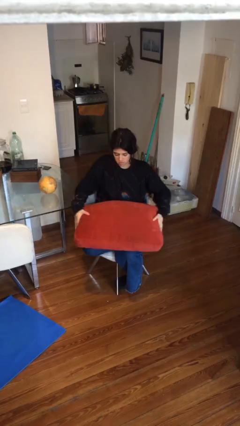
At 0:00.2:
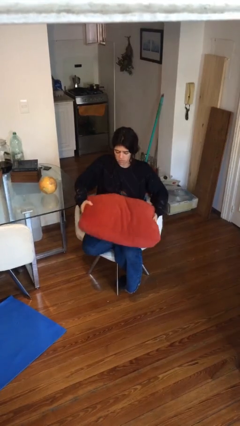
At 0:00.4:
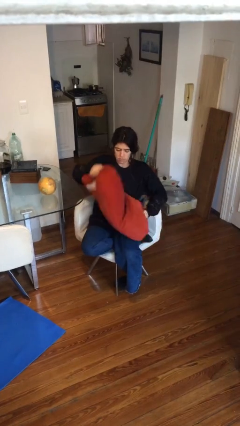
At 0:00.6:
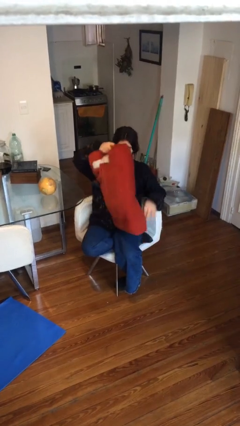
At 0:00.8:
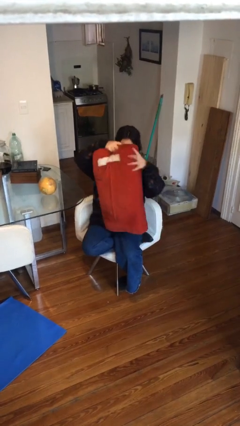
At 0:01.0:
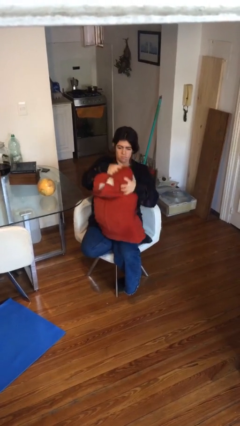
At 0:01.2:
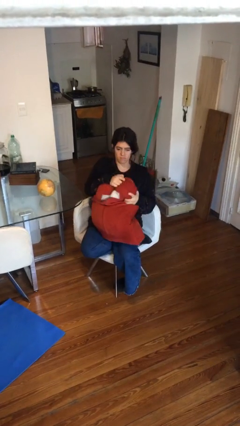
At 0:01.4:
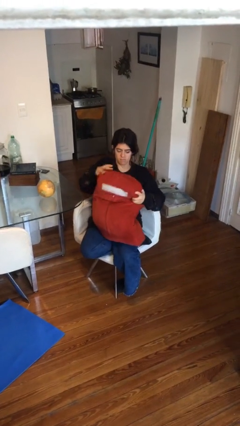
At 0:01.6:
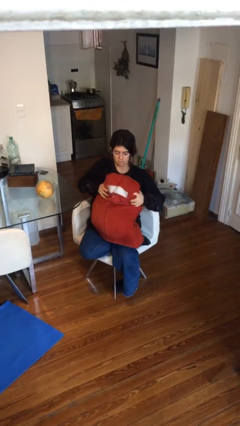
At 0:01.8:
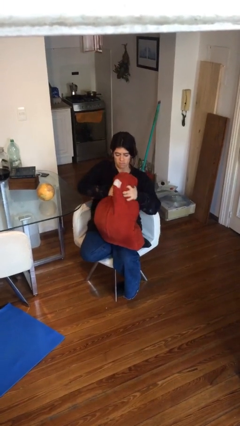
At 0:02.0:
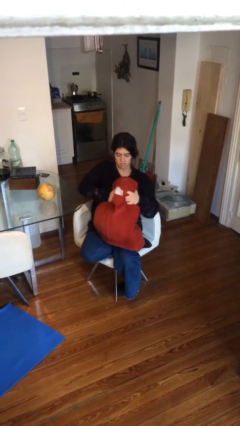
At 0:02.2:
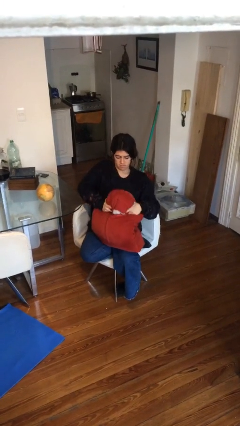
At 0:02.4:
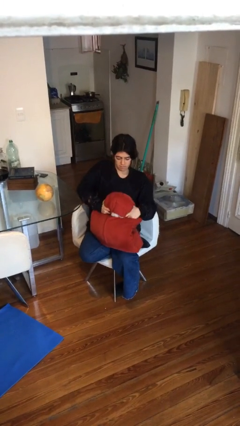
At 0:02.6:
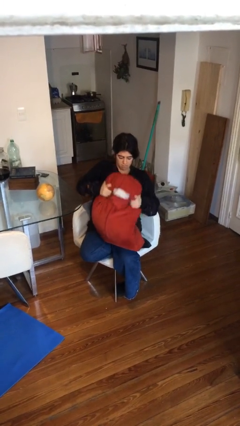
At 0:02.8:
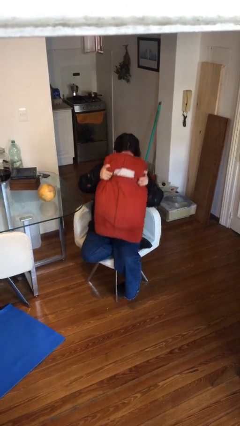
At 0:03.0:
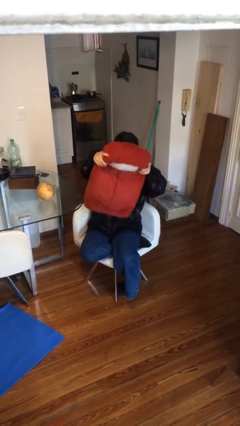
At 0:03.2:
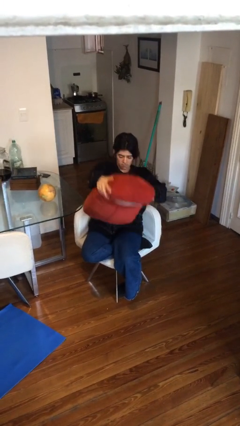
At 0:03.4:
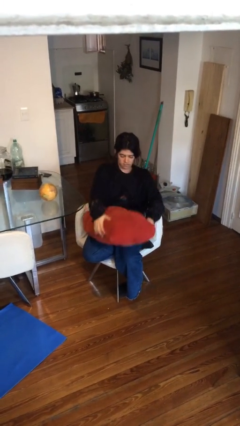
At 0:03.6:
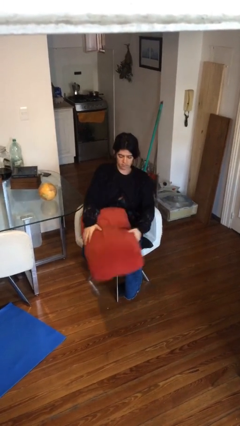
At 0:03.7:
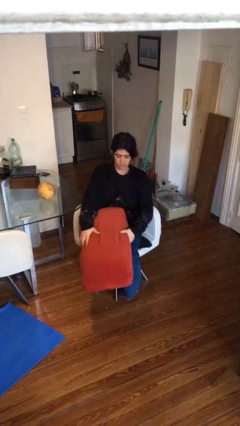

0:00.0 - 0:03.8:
person squeezes object

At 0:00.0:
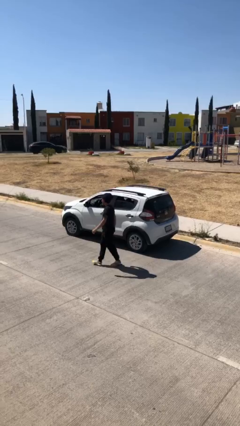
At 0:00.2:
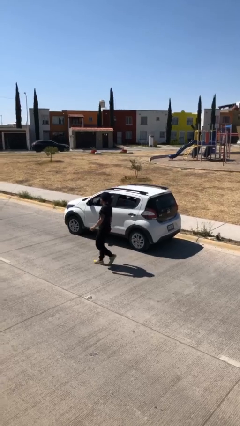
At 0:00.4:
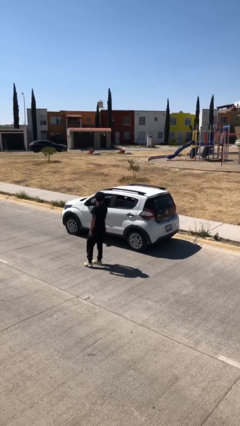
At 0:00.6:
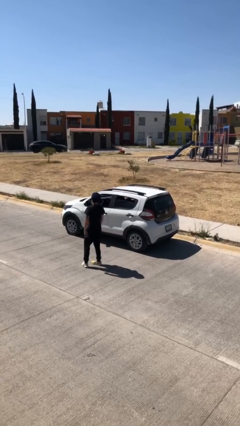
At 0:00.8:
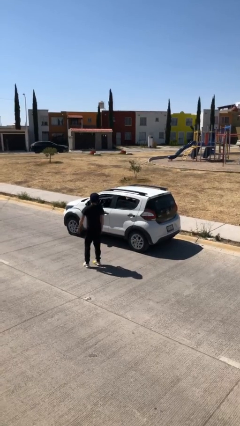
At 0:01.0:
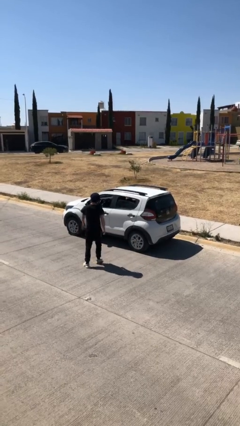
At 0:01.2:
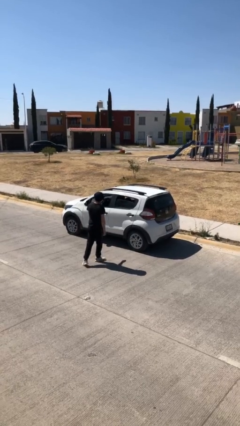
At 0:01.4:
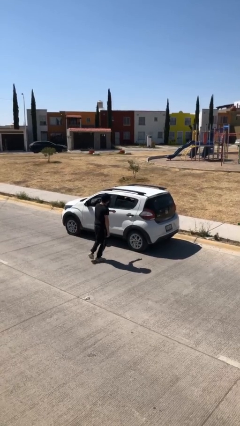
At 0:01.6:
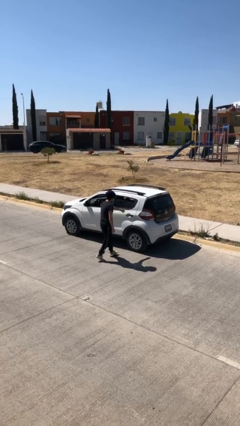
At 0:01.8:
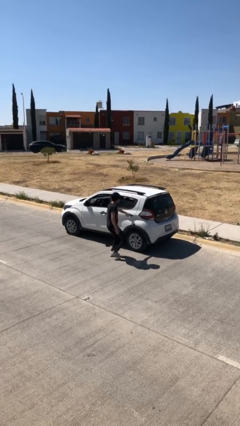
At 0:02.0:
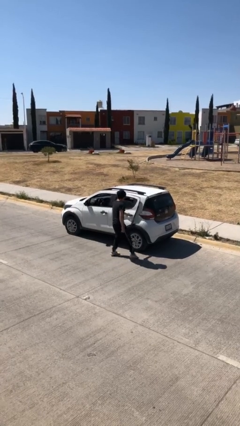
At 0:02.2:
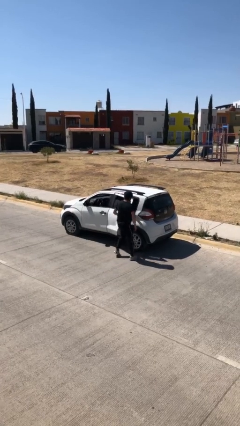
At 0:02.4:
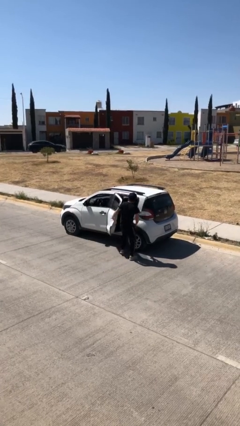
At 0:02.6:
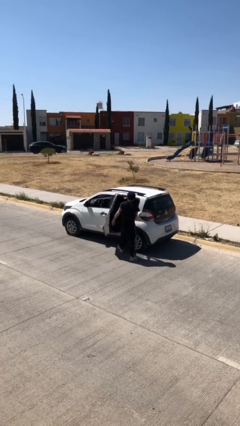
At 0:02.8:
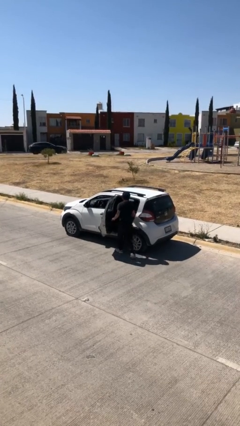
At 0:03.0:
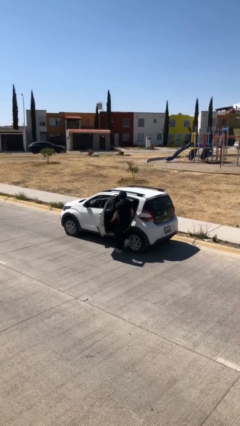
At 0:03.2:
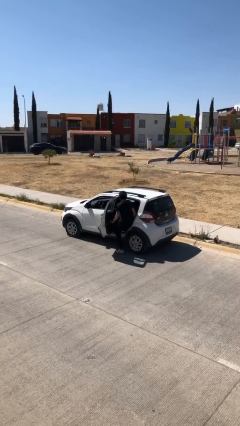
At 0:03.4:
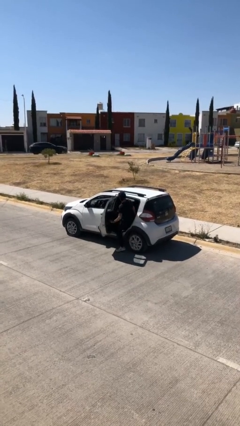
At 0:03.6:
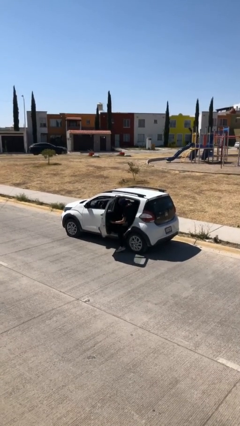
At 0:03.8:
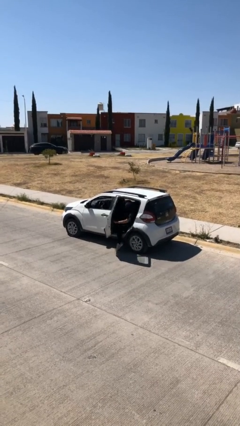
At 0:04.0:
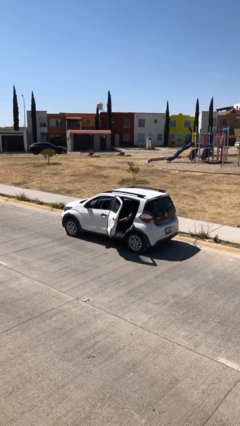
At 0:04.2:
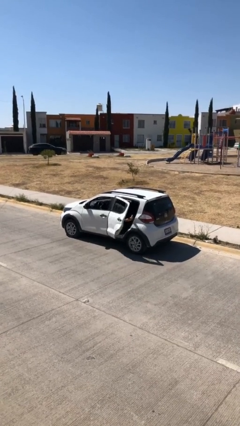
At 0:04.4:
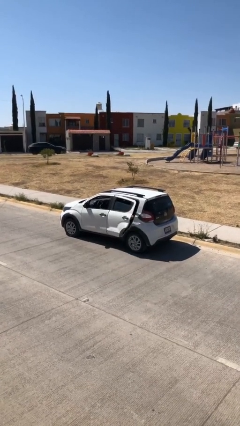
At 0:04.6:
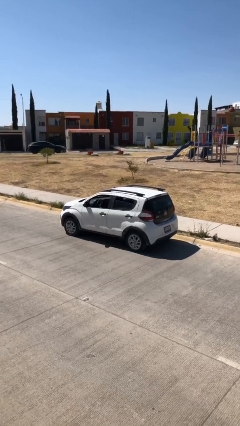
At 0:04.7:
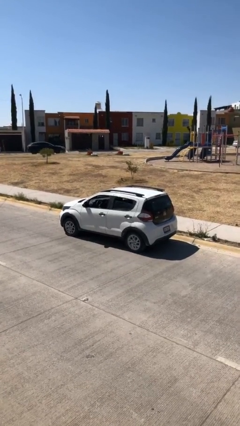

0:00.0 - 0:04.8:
car picks up person

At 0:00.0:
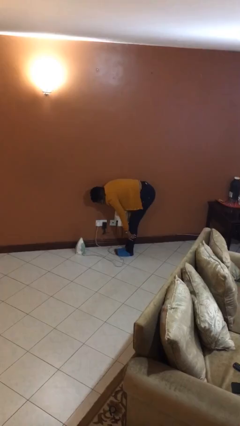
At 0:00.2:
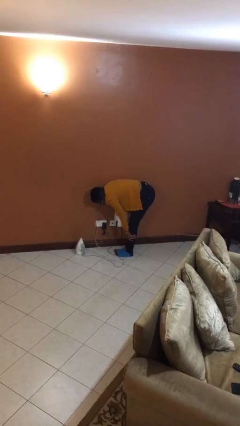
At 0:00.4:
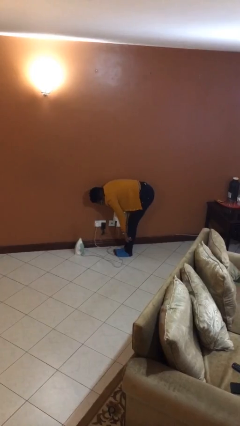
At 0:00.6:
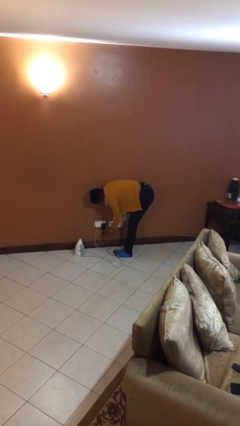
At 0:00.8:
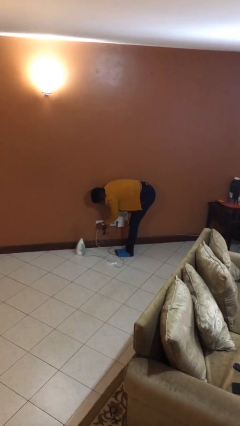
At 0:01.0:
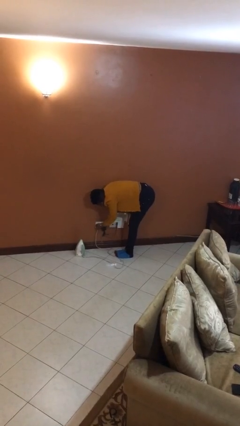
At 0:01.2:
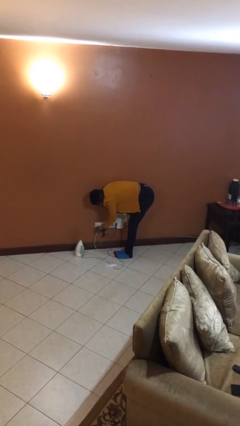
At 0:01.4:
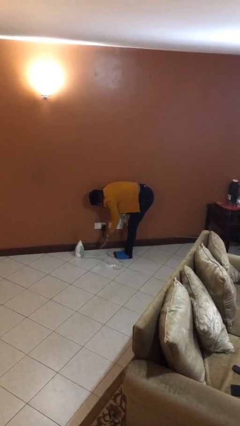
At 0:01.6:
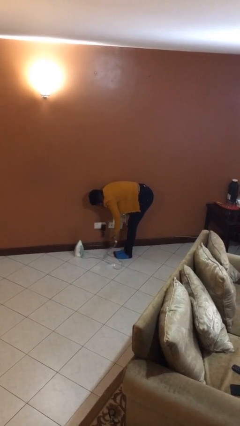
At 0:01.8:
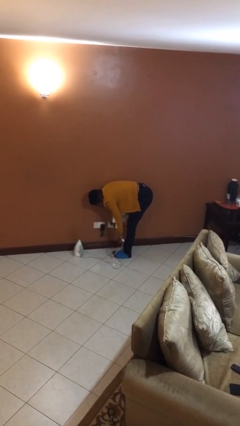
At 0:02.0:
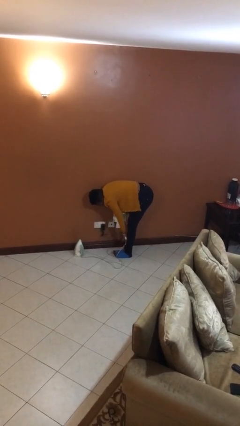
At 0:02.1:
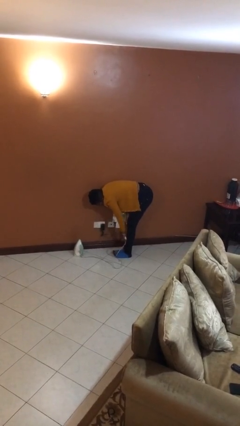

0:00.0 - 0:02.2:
person unplugs from electrical socket

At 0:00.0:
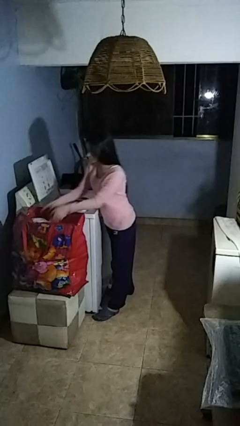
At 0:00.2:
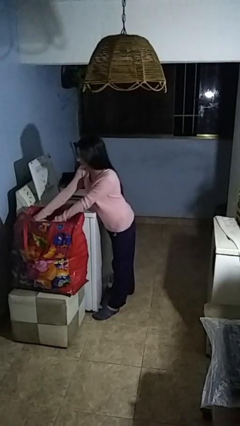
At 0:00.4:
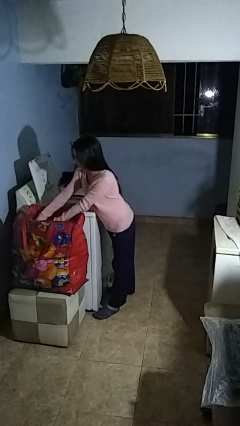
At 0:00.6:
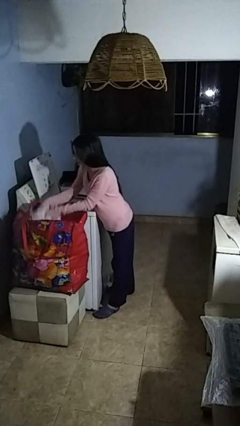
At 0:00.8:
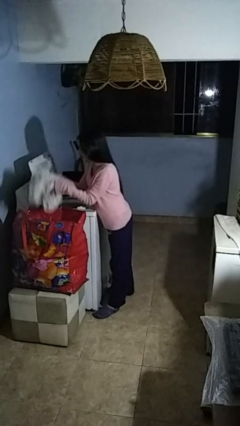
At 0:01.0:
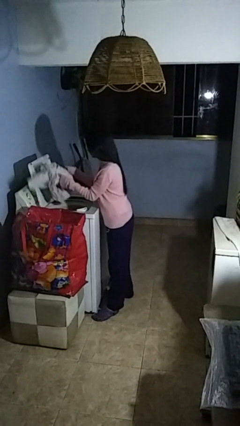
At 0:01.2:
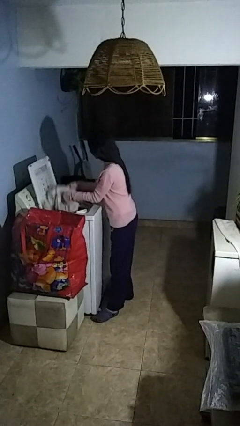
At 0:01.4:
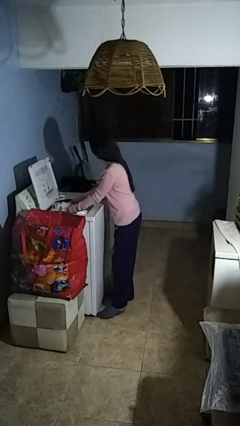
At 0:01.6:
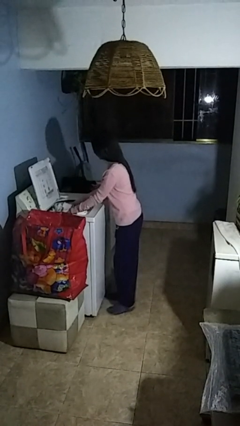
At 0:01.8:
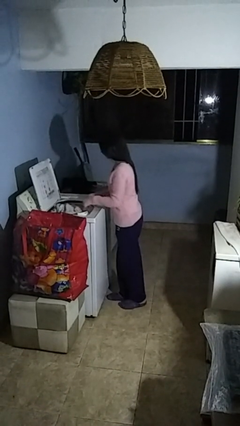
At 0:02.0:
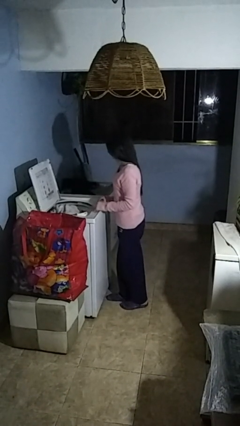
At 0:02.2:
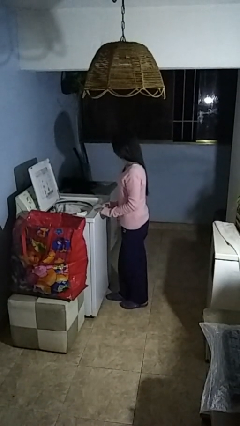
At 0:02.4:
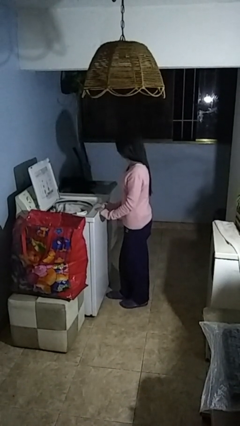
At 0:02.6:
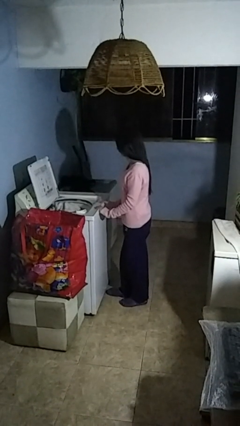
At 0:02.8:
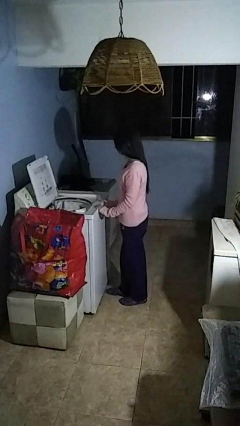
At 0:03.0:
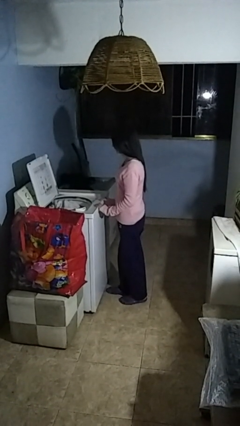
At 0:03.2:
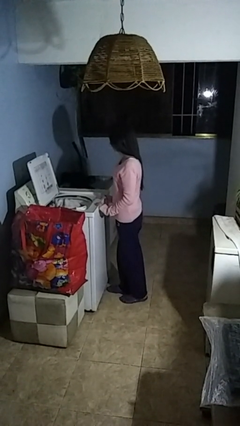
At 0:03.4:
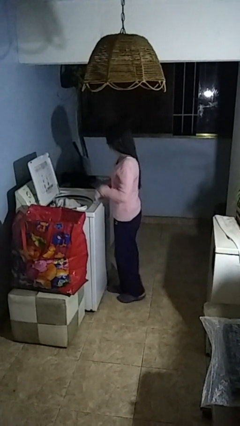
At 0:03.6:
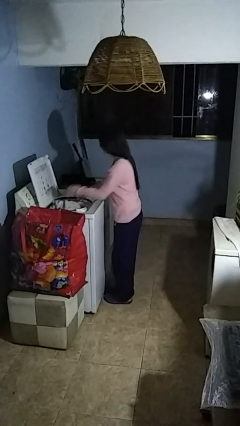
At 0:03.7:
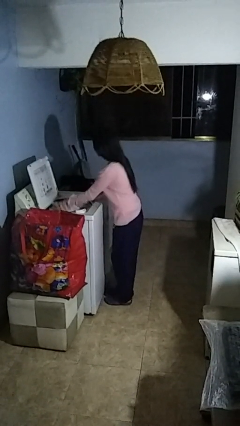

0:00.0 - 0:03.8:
person loads clotheswasher

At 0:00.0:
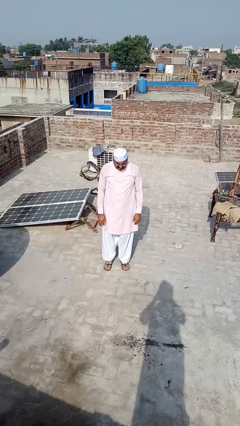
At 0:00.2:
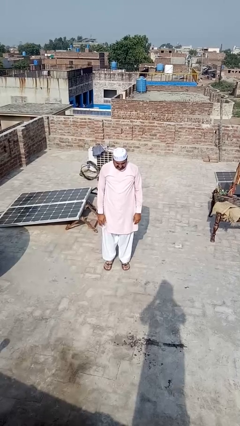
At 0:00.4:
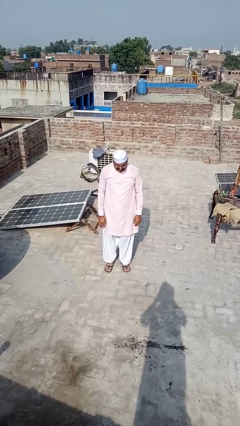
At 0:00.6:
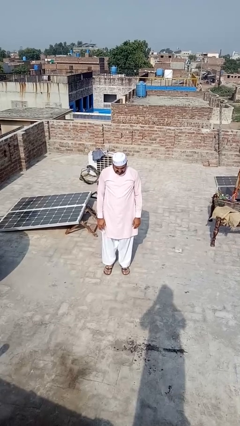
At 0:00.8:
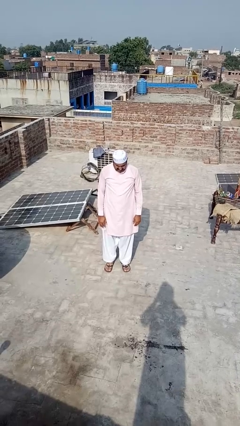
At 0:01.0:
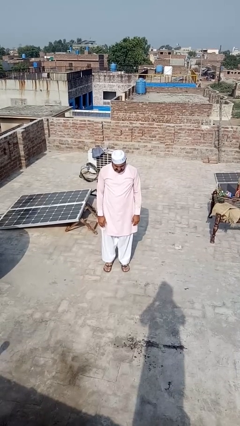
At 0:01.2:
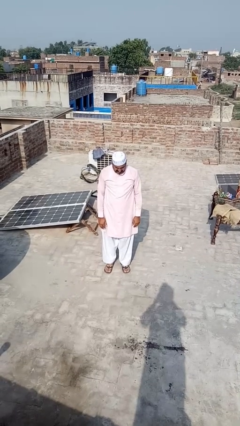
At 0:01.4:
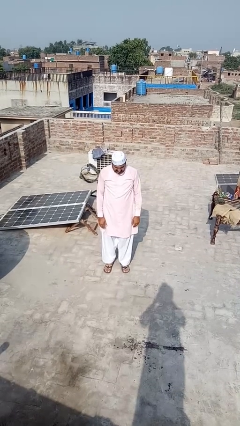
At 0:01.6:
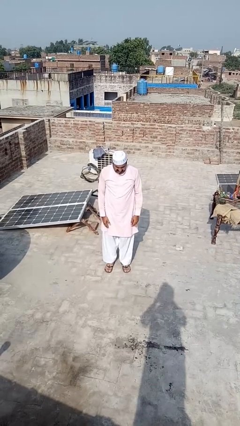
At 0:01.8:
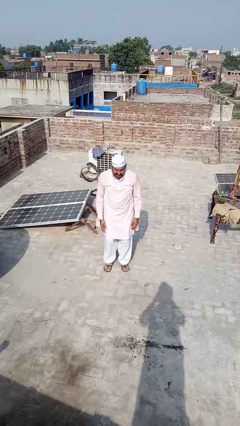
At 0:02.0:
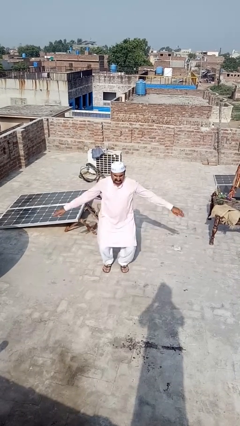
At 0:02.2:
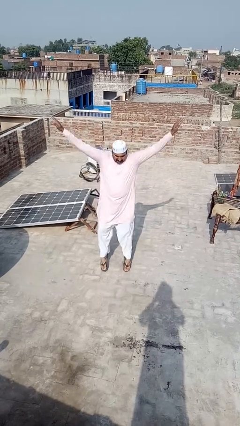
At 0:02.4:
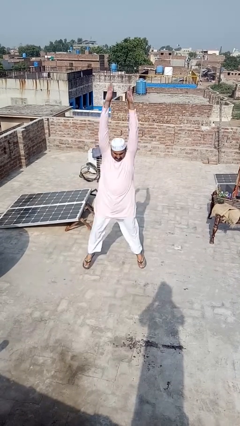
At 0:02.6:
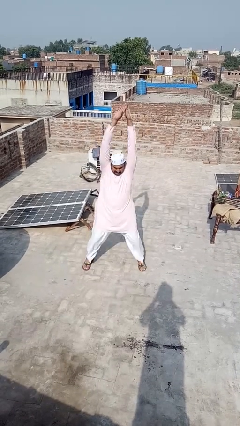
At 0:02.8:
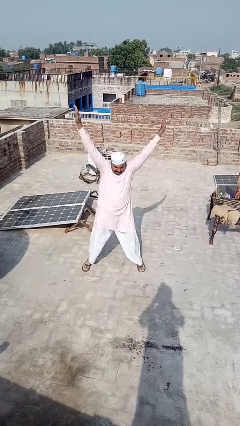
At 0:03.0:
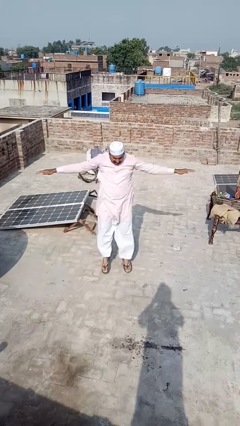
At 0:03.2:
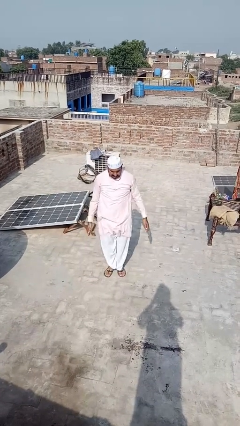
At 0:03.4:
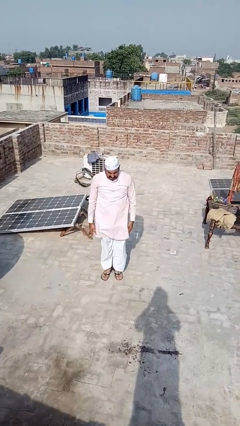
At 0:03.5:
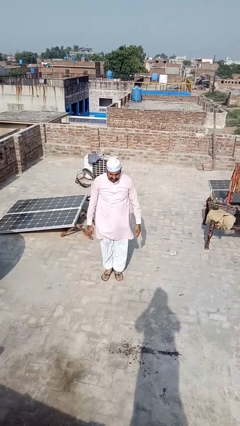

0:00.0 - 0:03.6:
person exercises with jumping jacks
